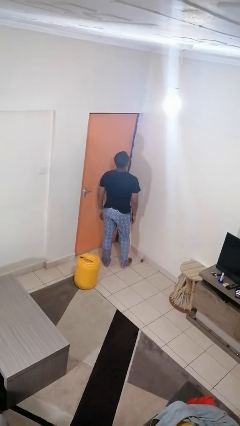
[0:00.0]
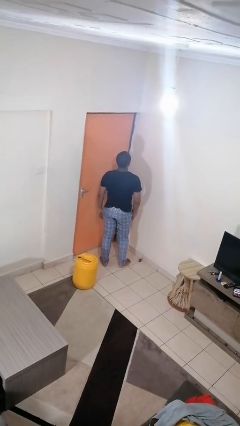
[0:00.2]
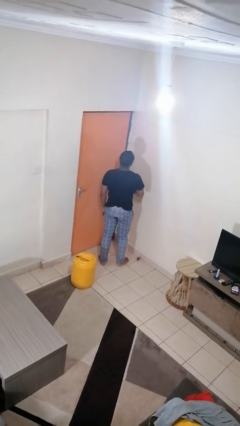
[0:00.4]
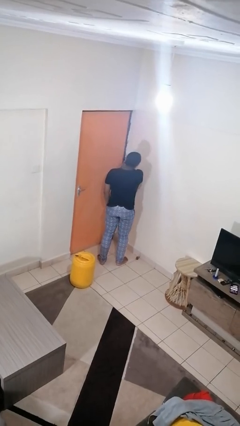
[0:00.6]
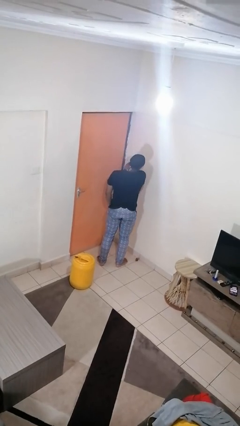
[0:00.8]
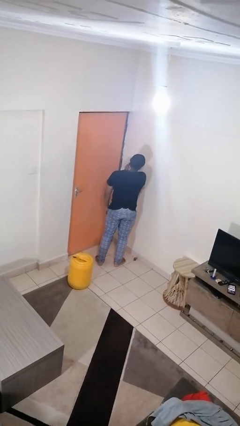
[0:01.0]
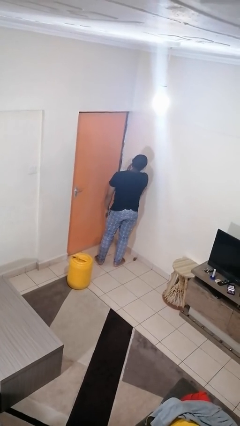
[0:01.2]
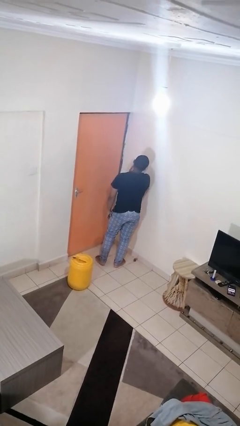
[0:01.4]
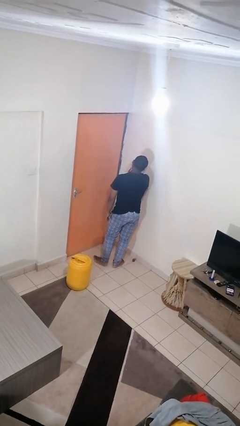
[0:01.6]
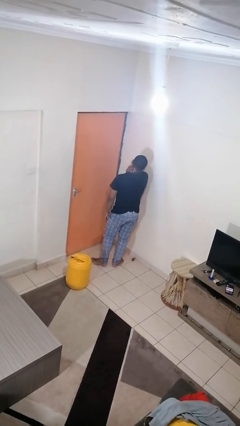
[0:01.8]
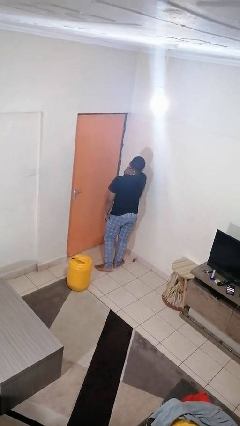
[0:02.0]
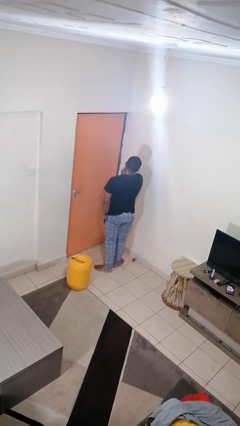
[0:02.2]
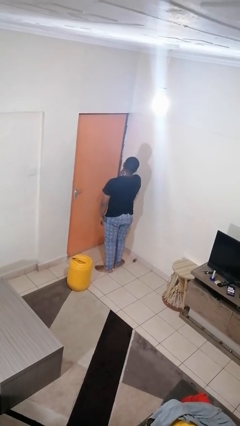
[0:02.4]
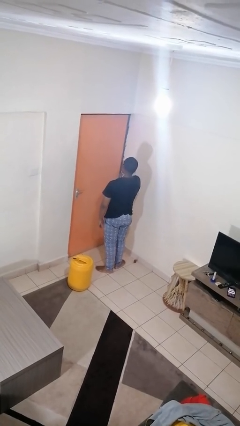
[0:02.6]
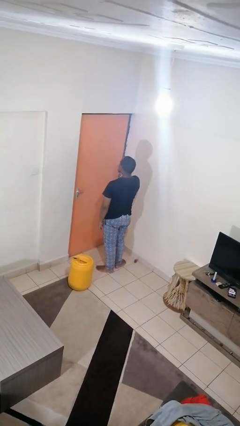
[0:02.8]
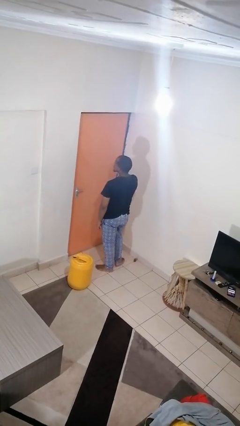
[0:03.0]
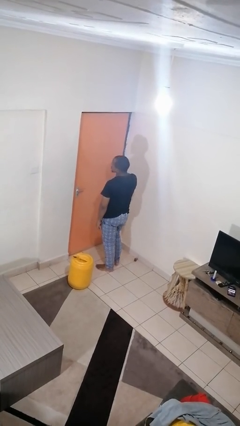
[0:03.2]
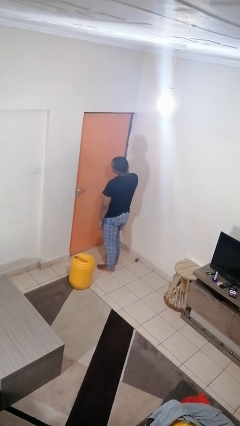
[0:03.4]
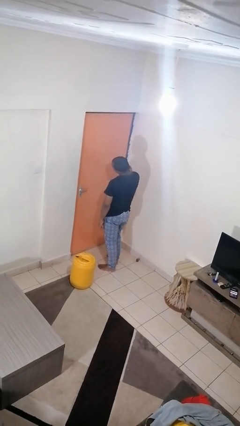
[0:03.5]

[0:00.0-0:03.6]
person rubs neck

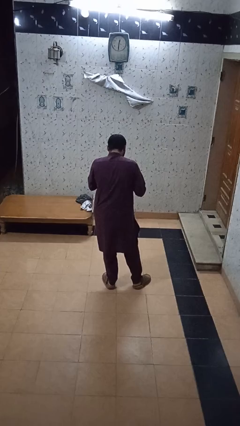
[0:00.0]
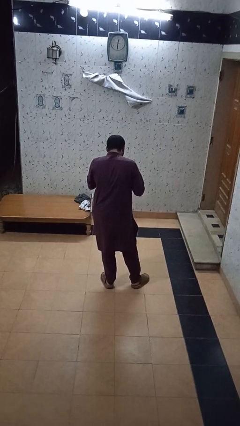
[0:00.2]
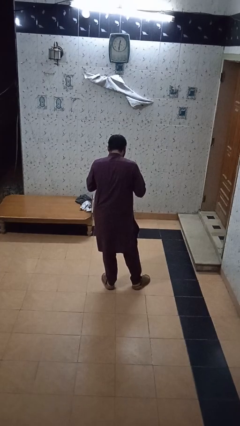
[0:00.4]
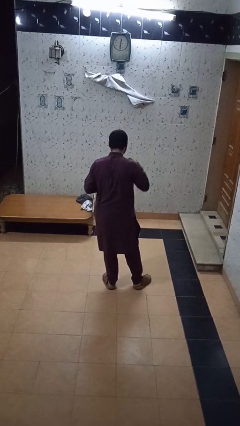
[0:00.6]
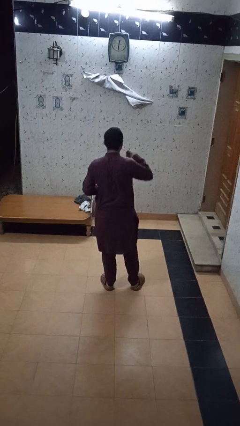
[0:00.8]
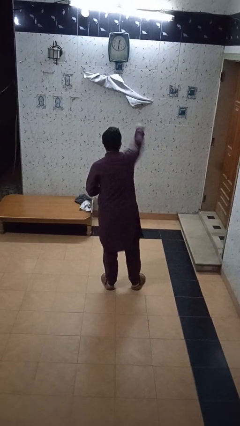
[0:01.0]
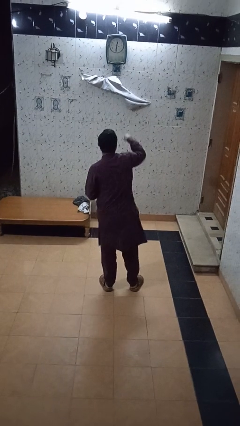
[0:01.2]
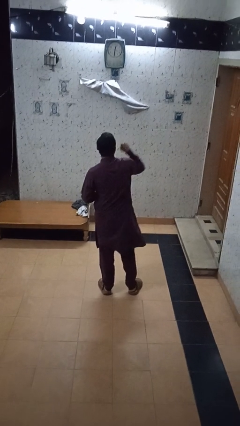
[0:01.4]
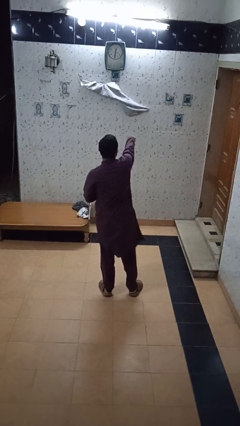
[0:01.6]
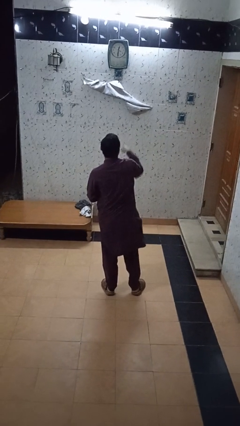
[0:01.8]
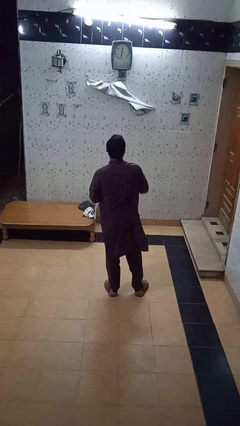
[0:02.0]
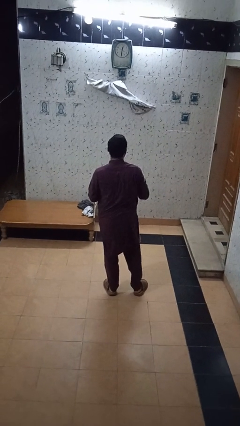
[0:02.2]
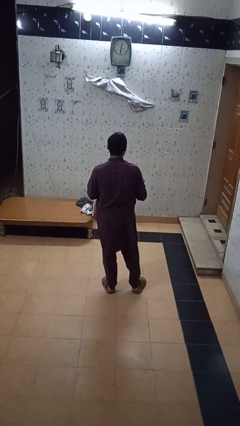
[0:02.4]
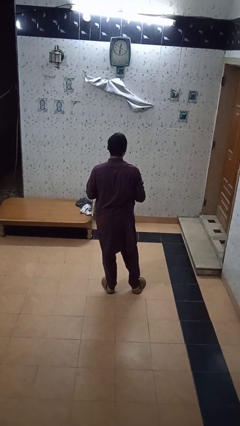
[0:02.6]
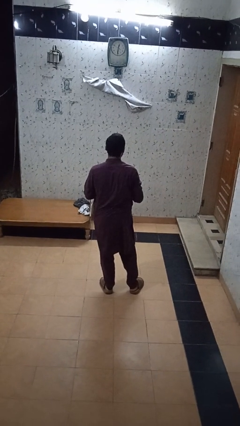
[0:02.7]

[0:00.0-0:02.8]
person punches

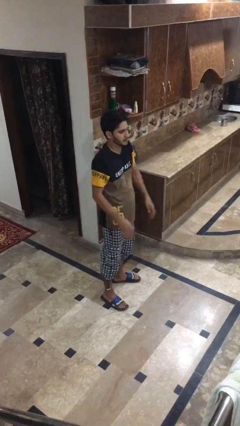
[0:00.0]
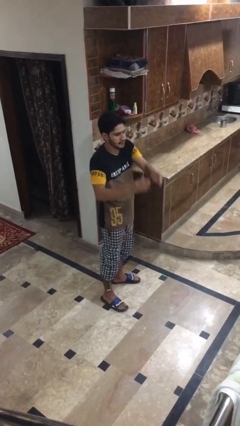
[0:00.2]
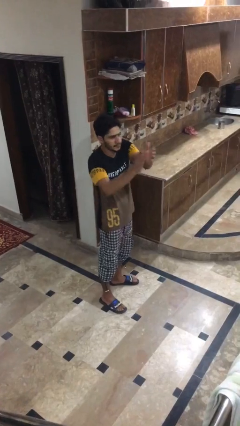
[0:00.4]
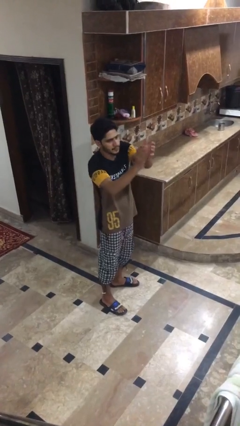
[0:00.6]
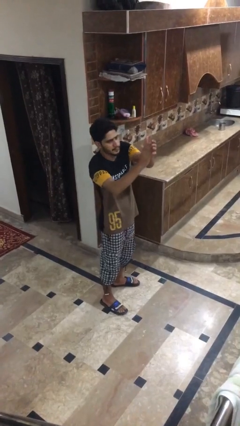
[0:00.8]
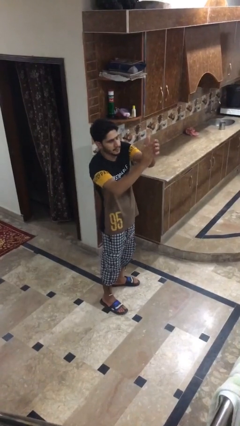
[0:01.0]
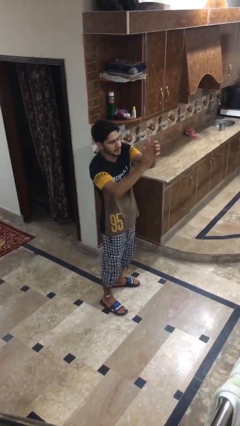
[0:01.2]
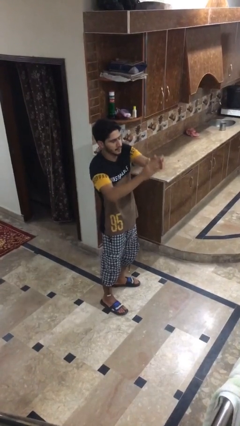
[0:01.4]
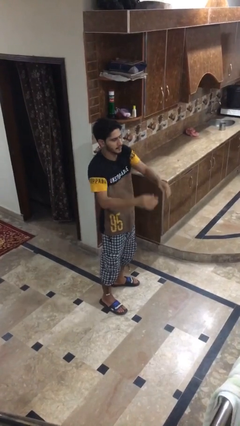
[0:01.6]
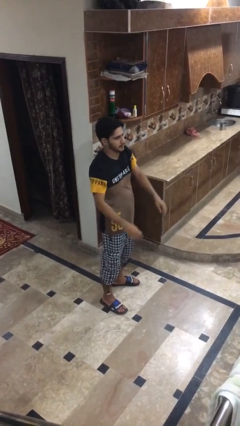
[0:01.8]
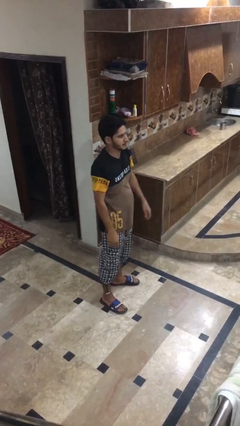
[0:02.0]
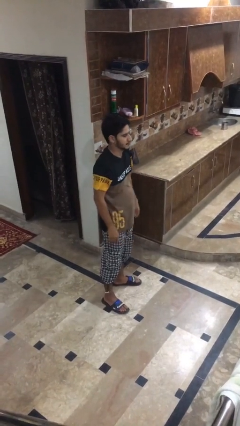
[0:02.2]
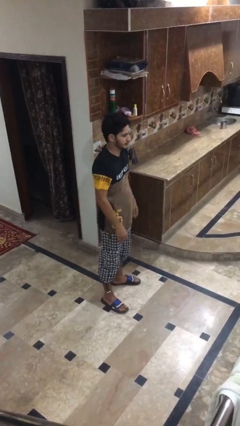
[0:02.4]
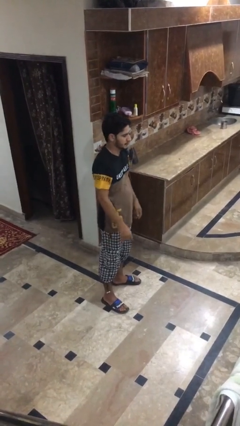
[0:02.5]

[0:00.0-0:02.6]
person claps hands

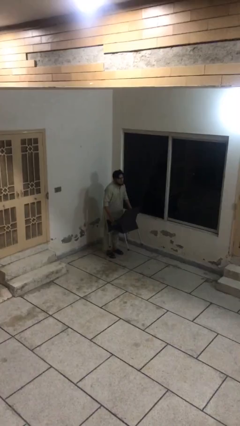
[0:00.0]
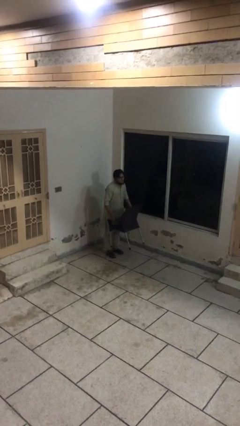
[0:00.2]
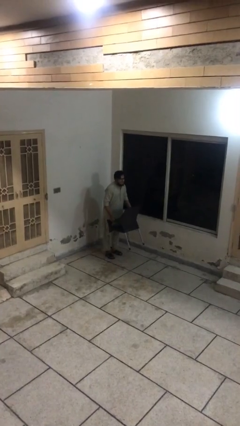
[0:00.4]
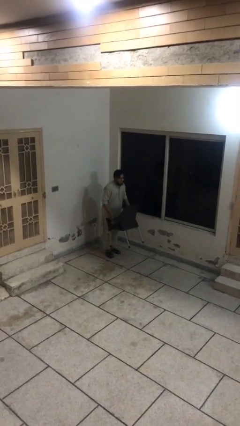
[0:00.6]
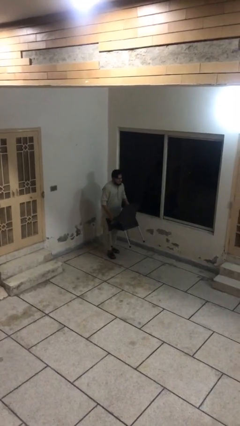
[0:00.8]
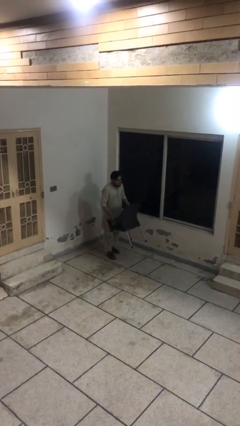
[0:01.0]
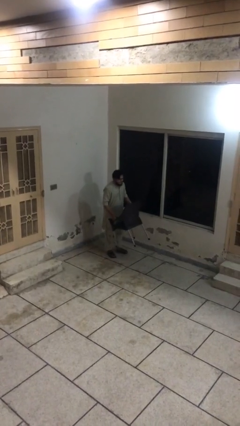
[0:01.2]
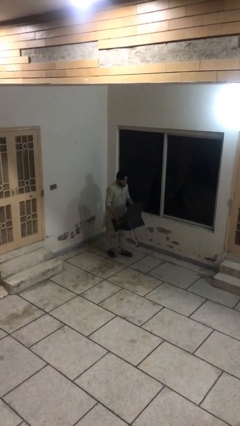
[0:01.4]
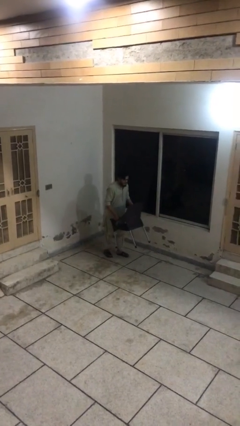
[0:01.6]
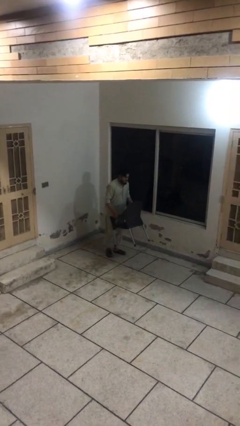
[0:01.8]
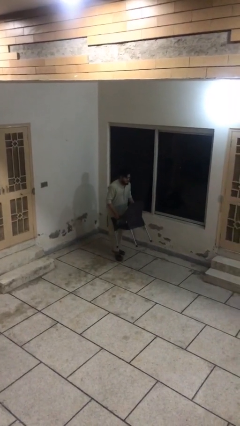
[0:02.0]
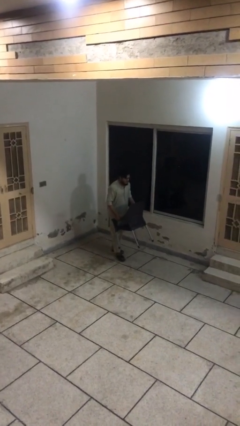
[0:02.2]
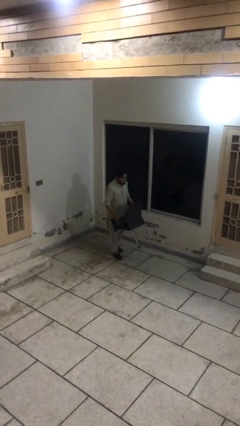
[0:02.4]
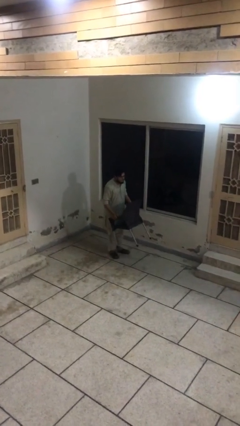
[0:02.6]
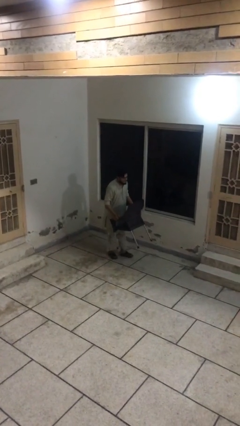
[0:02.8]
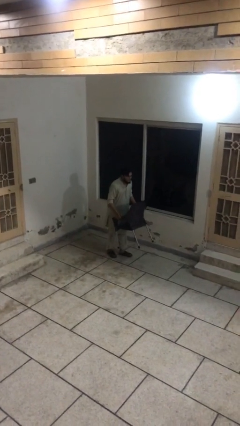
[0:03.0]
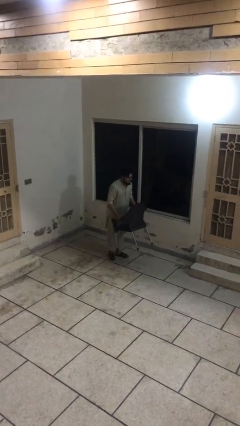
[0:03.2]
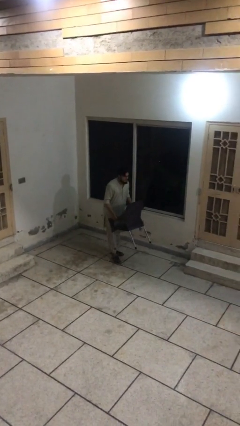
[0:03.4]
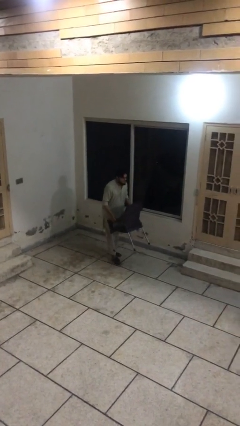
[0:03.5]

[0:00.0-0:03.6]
person carries heavy object

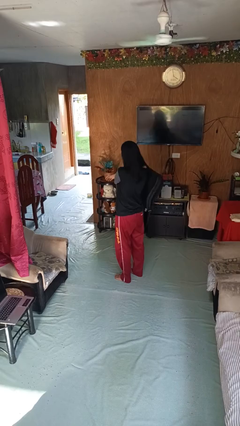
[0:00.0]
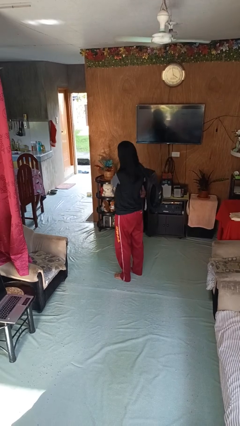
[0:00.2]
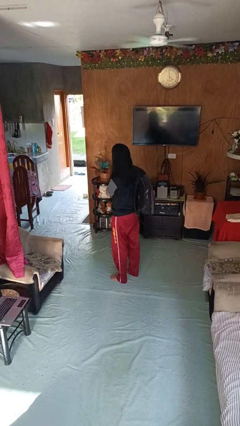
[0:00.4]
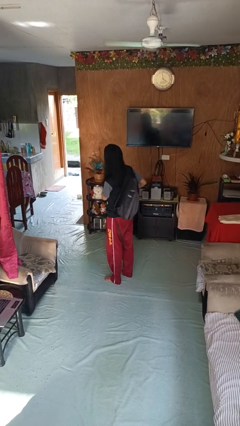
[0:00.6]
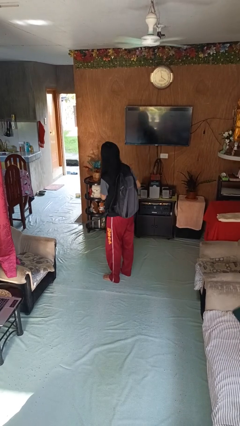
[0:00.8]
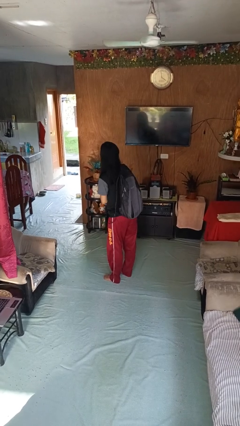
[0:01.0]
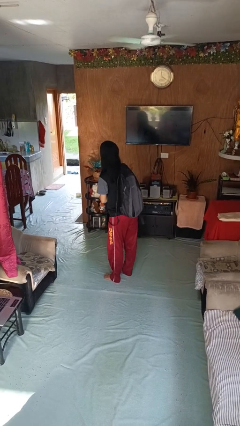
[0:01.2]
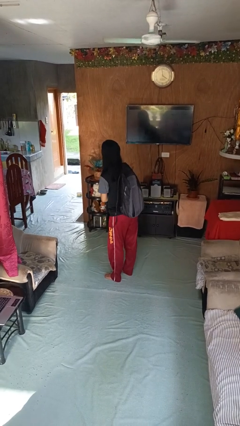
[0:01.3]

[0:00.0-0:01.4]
person puts on backpack

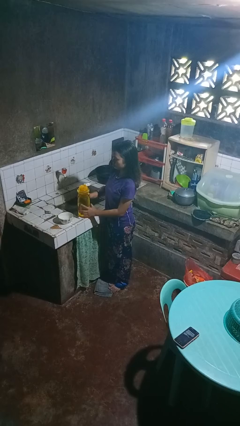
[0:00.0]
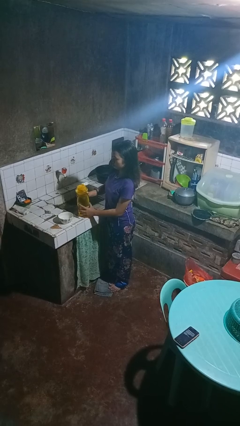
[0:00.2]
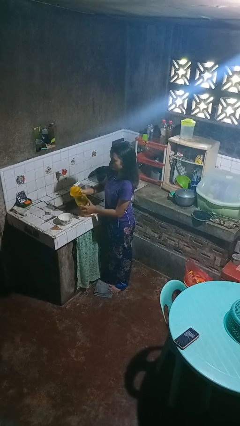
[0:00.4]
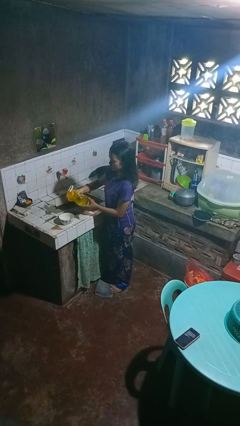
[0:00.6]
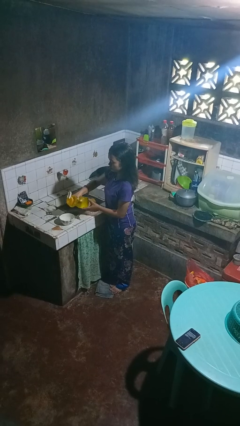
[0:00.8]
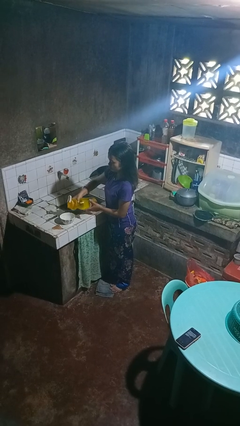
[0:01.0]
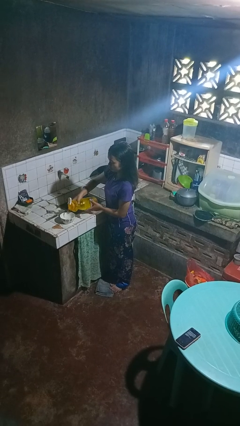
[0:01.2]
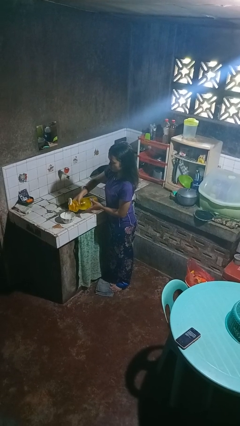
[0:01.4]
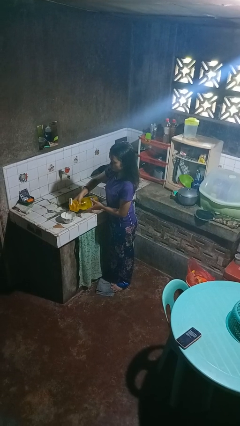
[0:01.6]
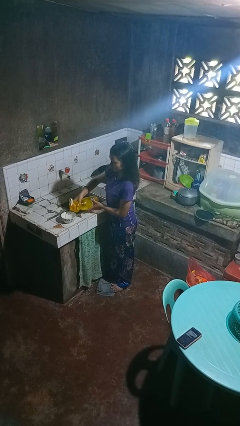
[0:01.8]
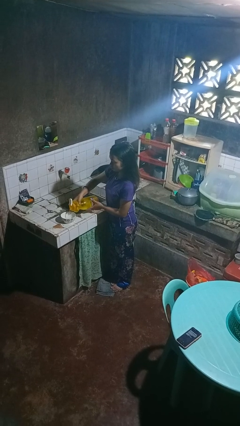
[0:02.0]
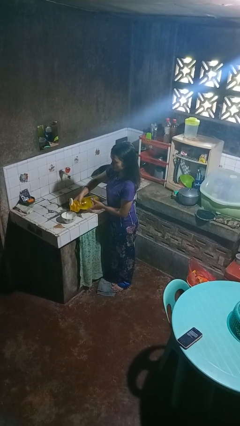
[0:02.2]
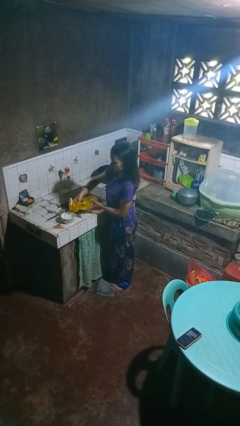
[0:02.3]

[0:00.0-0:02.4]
person pours into bowl

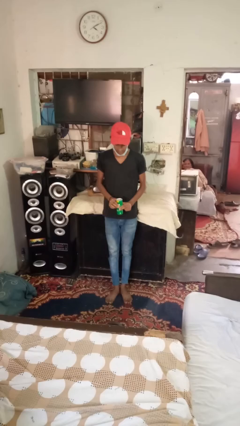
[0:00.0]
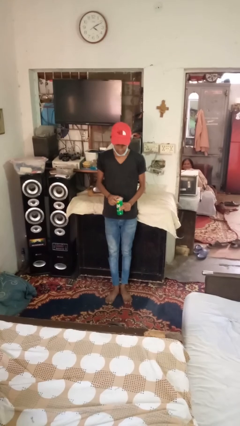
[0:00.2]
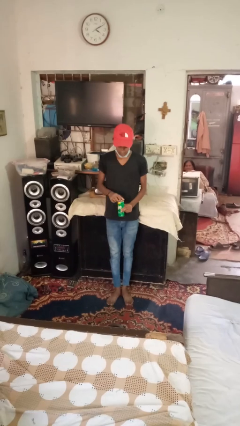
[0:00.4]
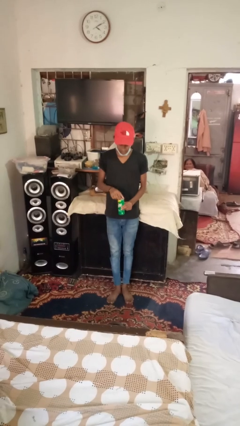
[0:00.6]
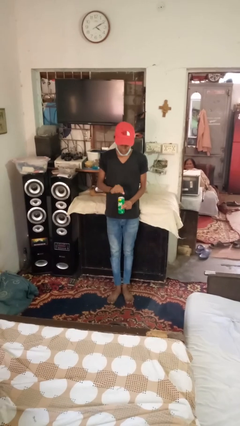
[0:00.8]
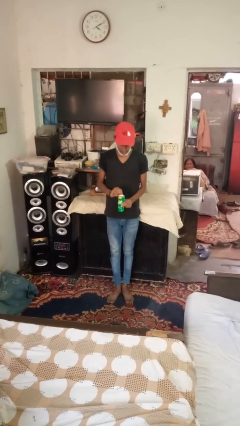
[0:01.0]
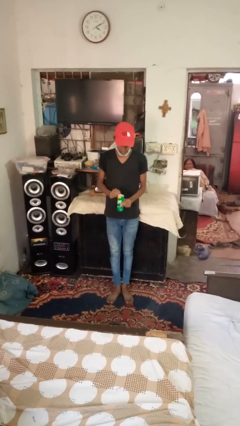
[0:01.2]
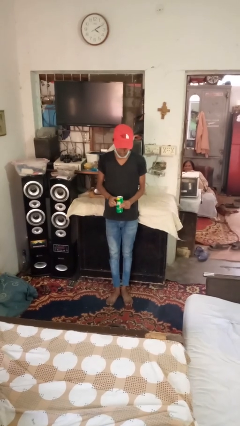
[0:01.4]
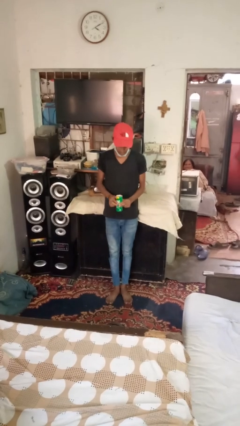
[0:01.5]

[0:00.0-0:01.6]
person opens beverage can
